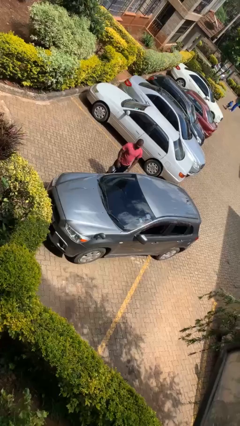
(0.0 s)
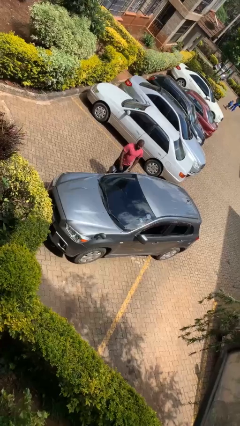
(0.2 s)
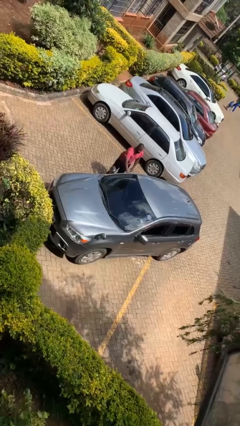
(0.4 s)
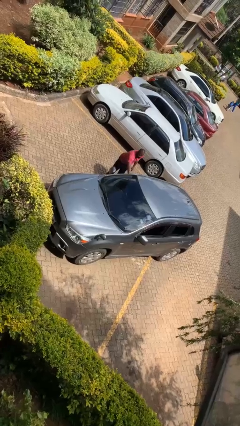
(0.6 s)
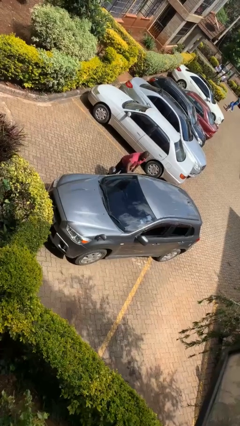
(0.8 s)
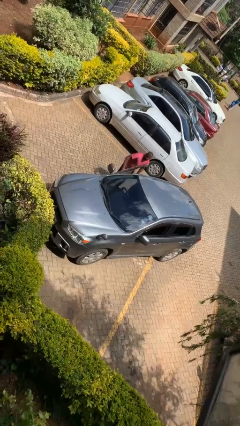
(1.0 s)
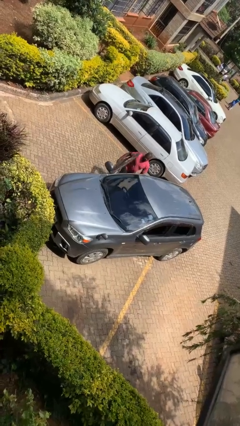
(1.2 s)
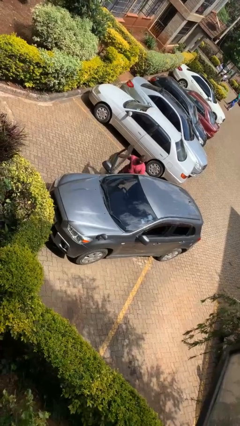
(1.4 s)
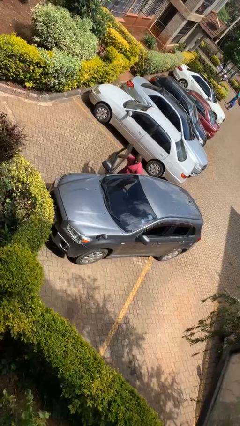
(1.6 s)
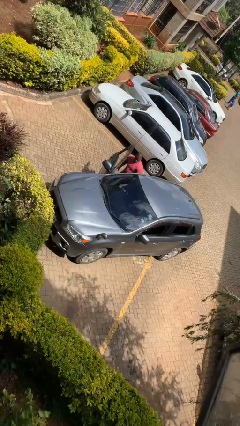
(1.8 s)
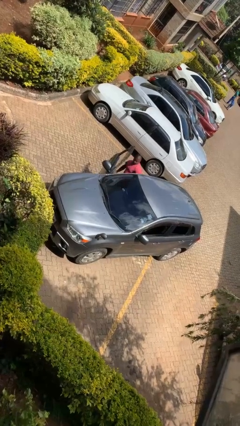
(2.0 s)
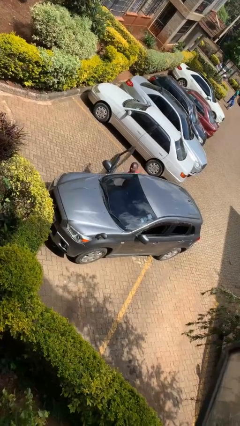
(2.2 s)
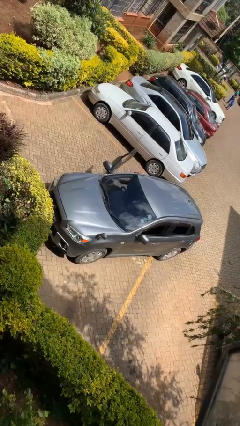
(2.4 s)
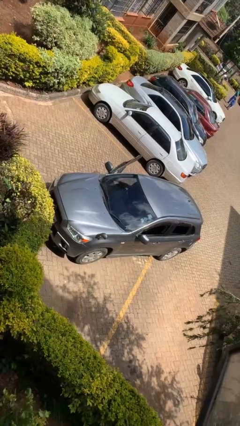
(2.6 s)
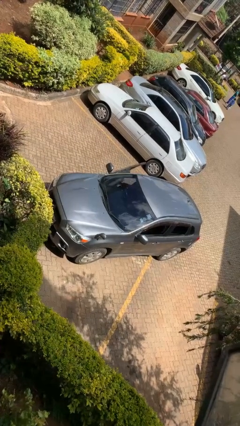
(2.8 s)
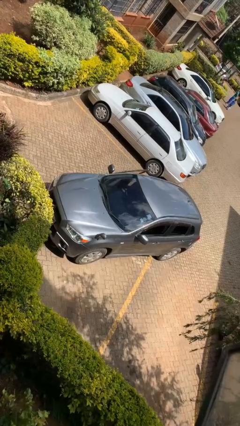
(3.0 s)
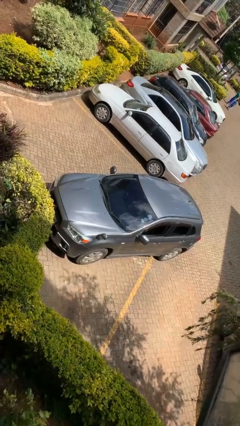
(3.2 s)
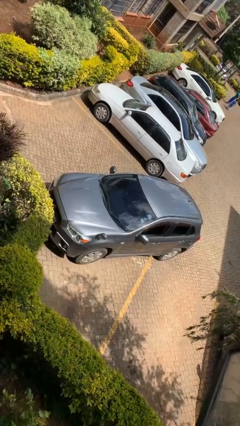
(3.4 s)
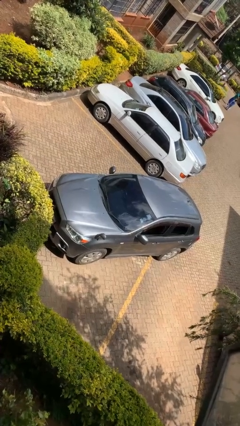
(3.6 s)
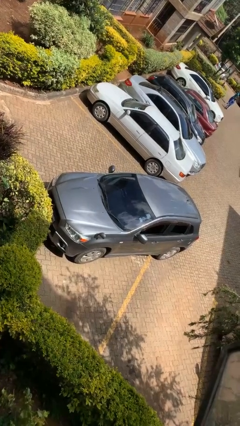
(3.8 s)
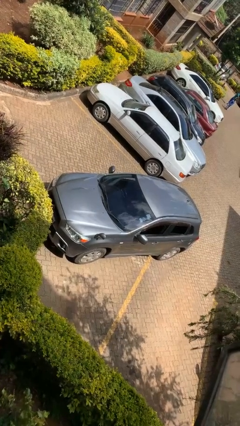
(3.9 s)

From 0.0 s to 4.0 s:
car picks up person

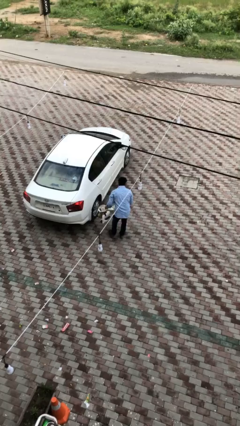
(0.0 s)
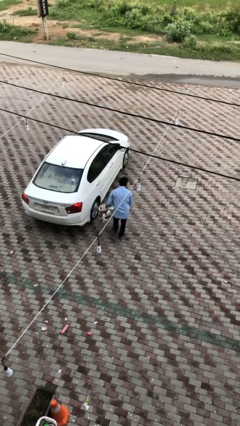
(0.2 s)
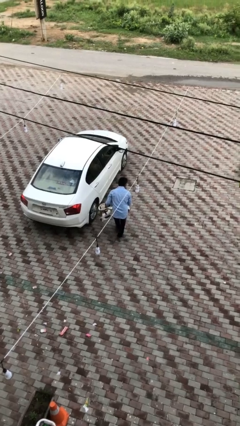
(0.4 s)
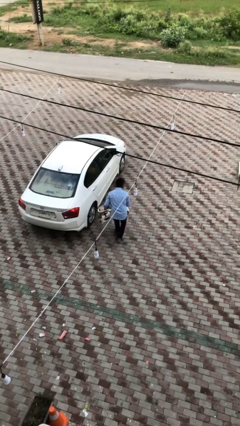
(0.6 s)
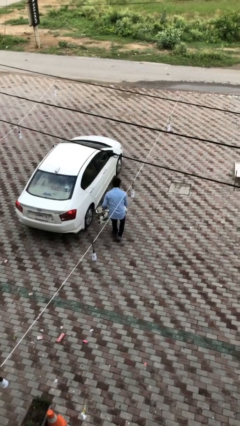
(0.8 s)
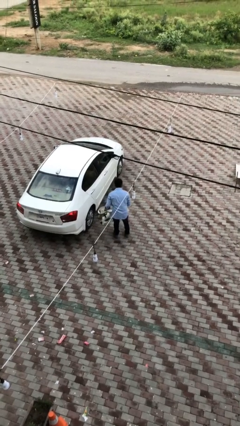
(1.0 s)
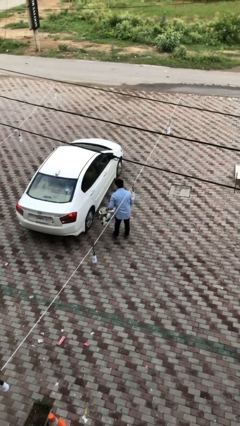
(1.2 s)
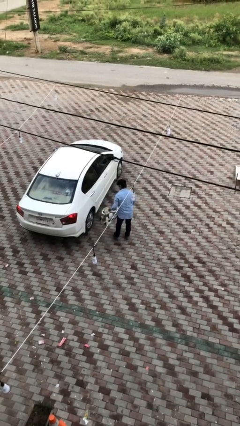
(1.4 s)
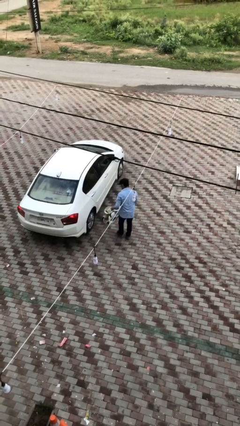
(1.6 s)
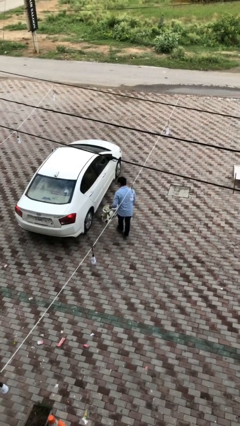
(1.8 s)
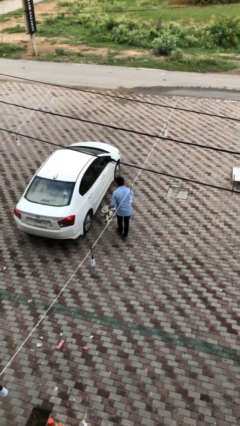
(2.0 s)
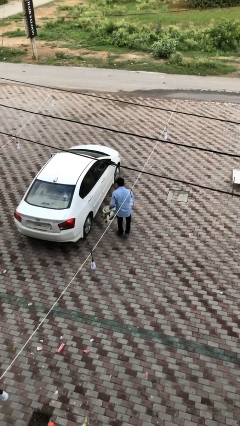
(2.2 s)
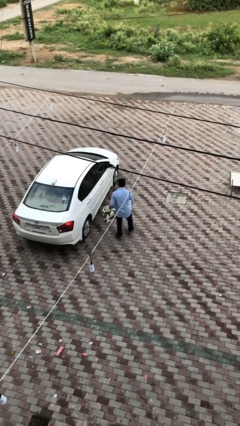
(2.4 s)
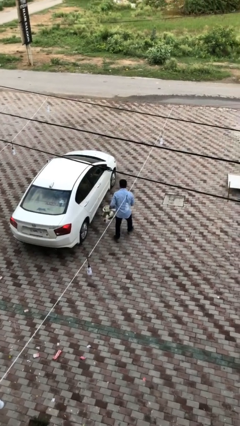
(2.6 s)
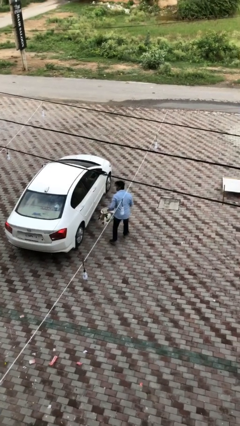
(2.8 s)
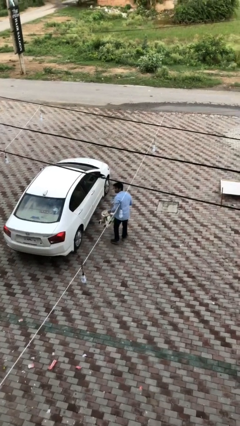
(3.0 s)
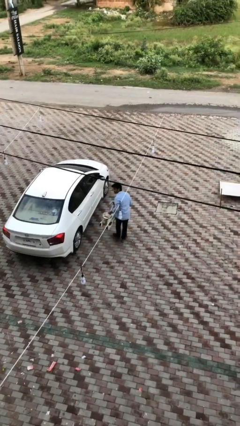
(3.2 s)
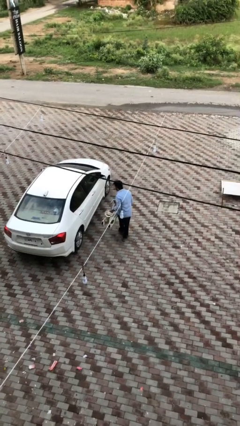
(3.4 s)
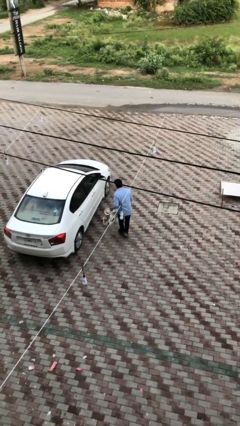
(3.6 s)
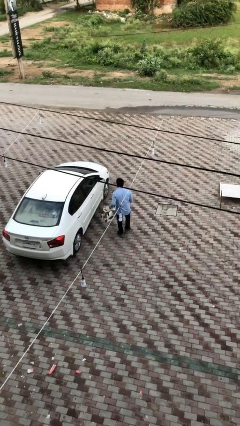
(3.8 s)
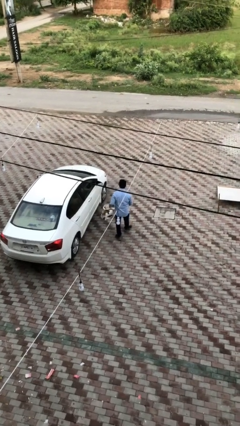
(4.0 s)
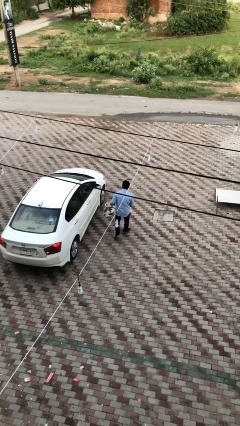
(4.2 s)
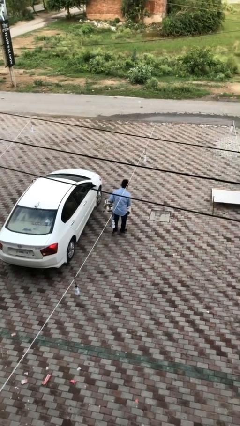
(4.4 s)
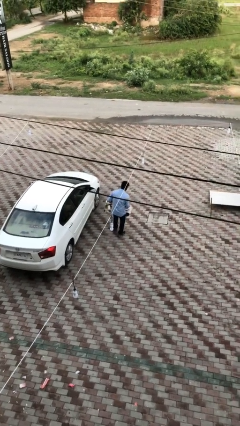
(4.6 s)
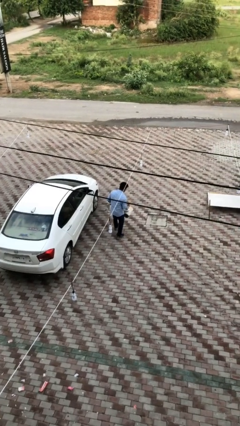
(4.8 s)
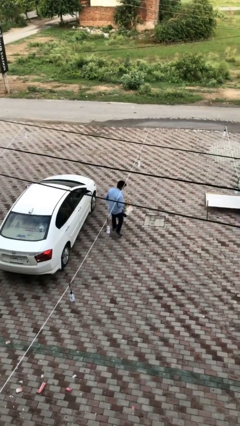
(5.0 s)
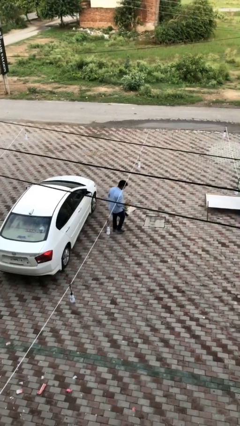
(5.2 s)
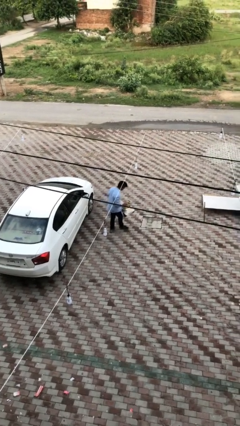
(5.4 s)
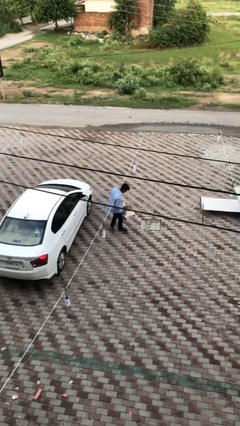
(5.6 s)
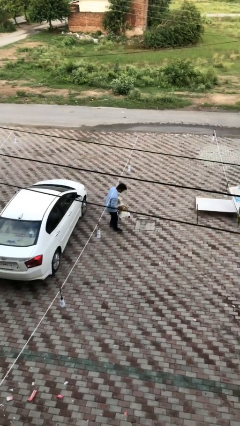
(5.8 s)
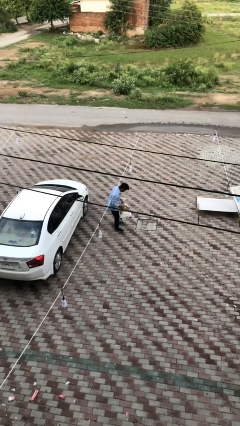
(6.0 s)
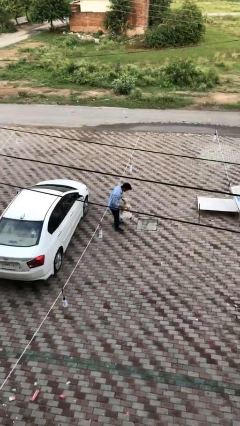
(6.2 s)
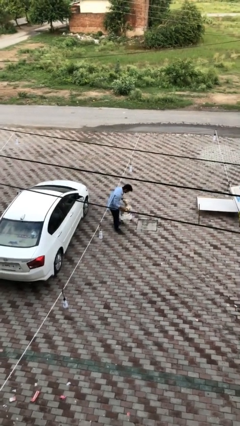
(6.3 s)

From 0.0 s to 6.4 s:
person carries heavy object

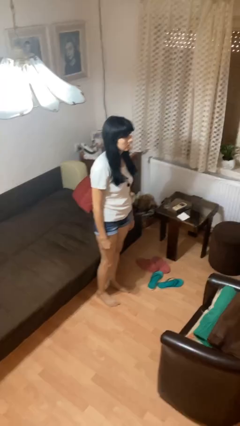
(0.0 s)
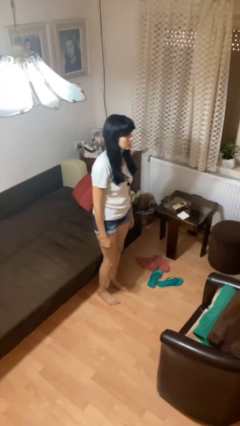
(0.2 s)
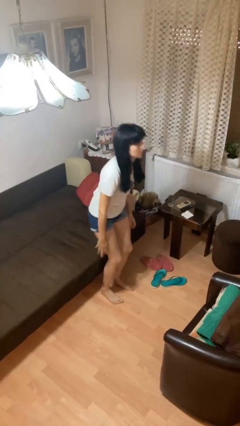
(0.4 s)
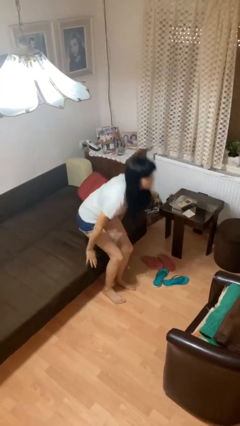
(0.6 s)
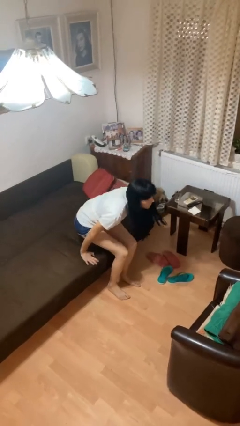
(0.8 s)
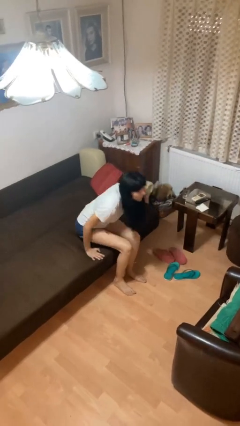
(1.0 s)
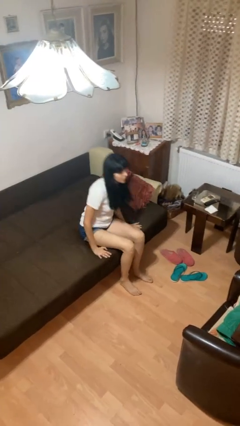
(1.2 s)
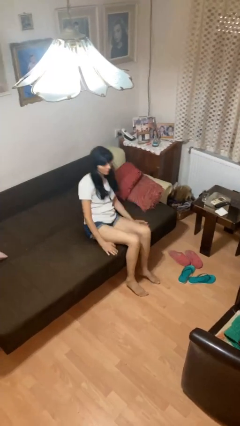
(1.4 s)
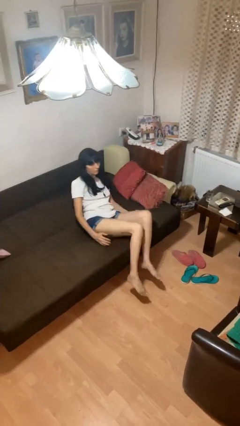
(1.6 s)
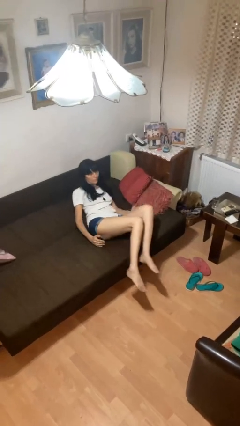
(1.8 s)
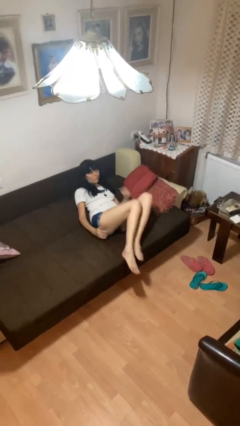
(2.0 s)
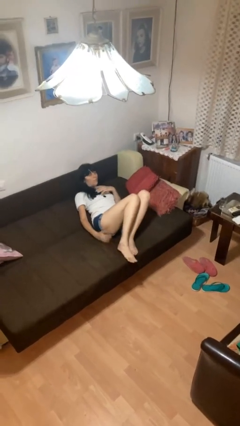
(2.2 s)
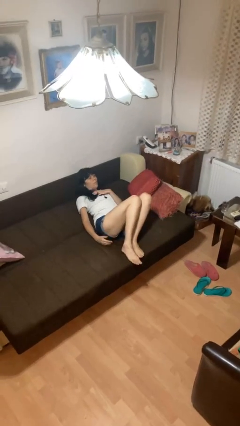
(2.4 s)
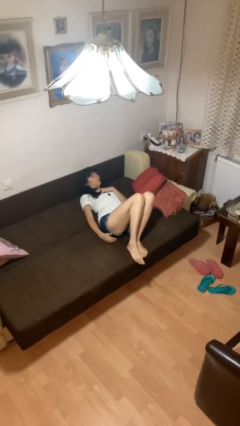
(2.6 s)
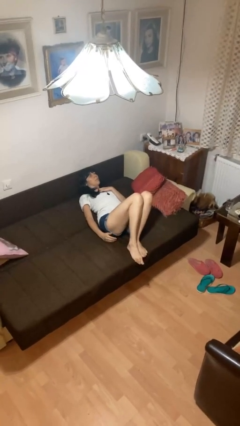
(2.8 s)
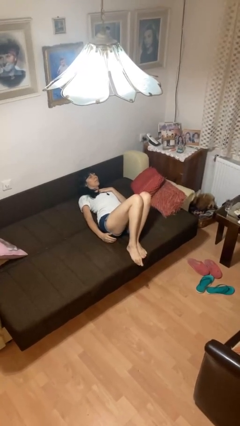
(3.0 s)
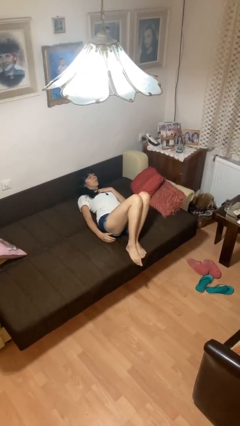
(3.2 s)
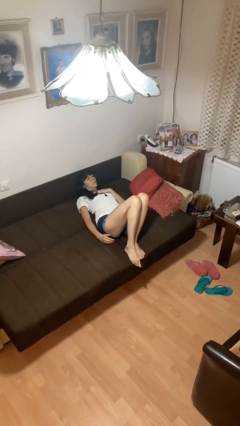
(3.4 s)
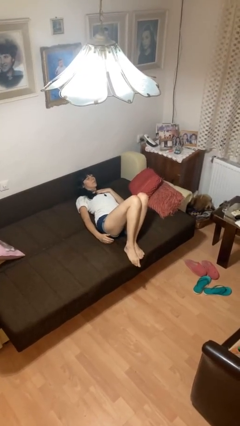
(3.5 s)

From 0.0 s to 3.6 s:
person lies down on bed

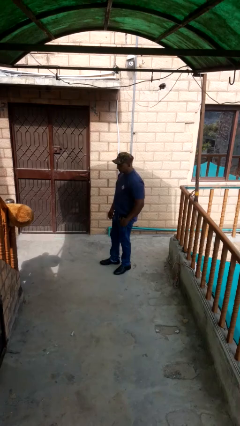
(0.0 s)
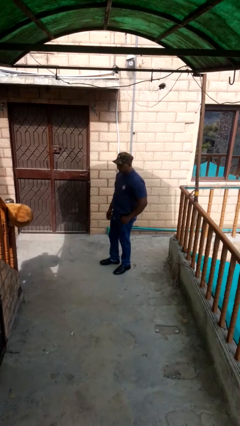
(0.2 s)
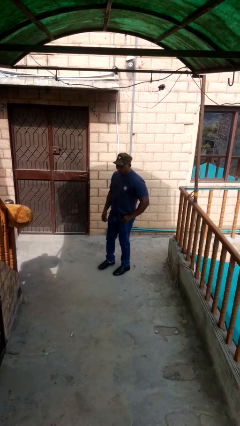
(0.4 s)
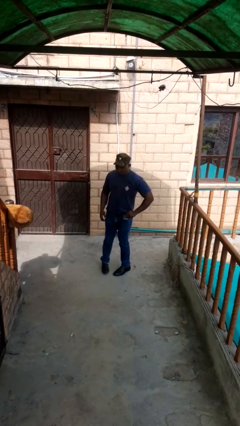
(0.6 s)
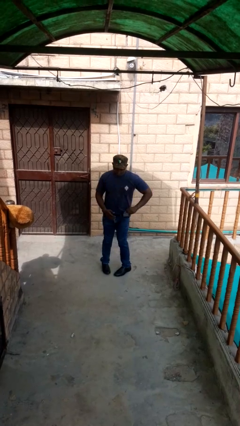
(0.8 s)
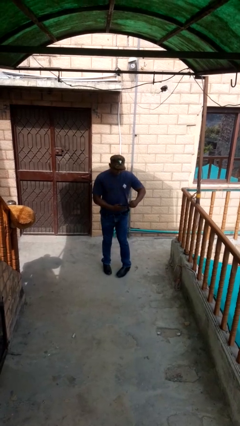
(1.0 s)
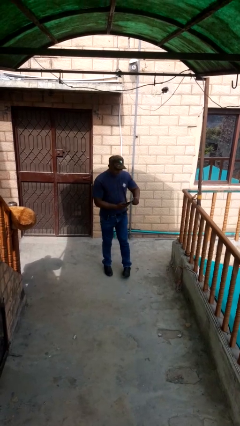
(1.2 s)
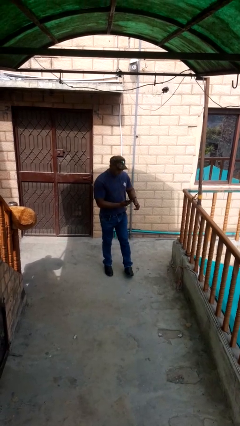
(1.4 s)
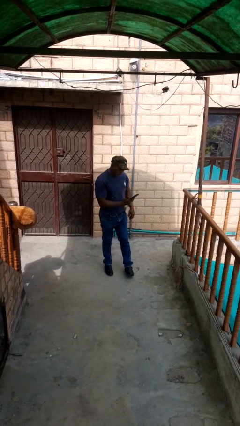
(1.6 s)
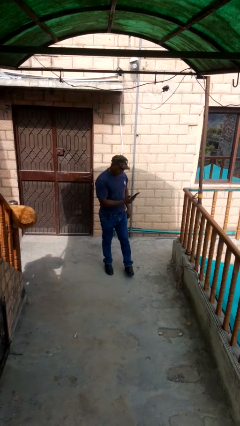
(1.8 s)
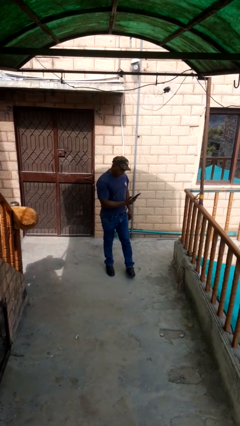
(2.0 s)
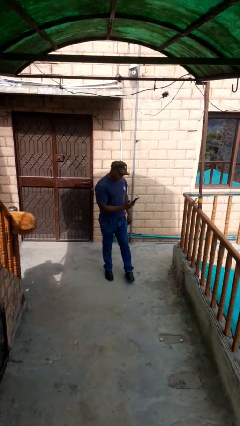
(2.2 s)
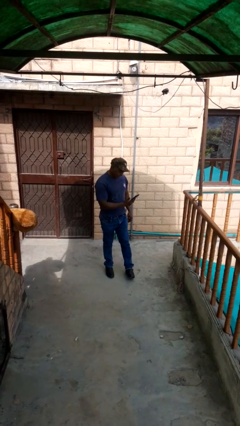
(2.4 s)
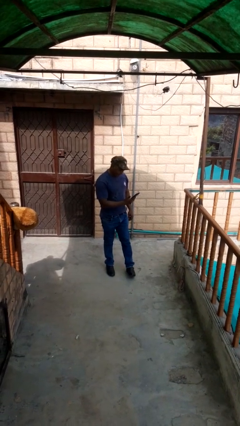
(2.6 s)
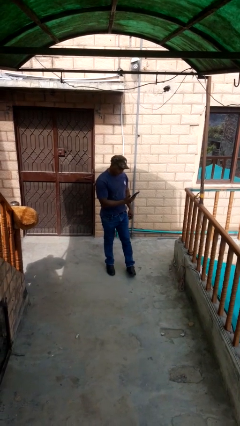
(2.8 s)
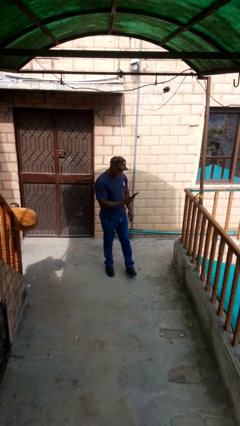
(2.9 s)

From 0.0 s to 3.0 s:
person takes phone from pocket

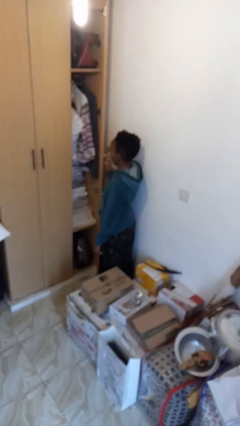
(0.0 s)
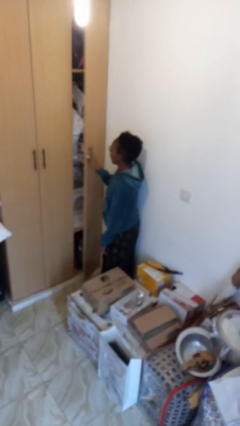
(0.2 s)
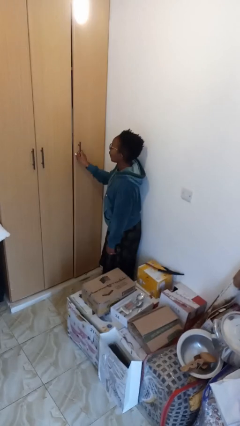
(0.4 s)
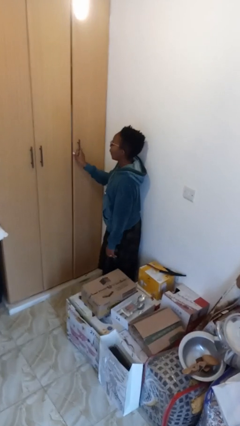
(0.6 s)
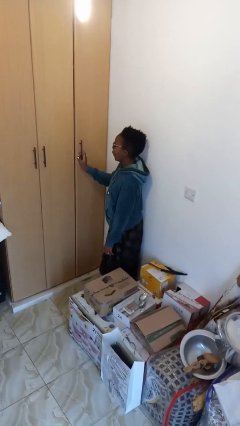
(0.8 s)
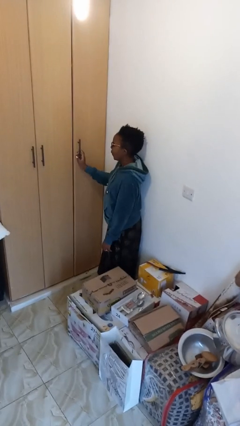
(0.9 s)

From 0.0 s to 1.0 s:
person closes closet door
